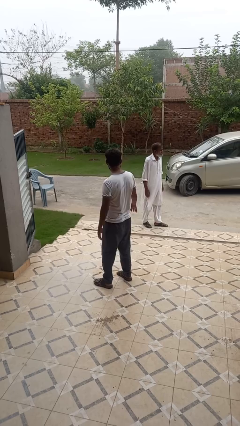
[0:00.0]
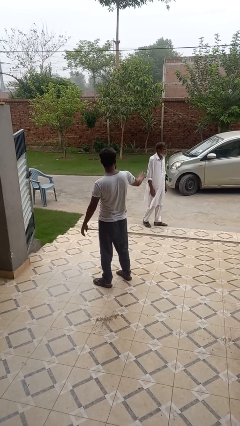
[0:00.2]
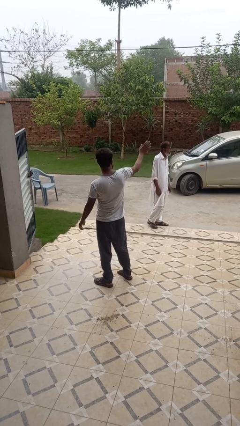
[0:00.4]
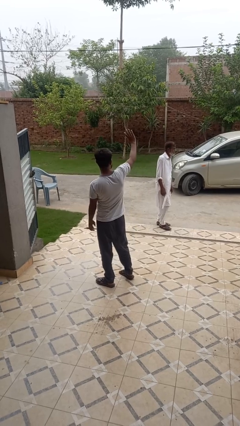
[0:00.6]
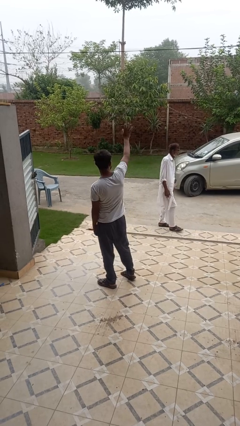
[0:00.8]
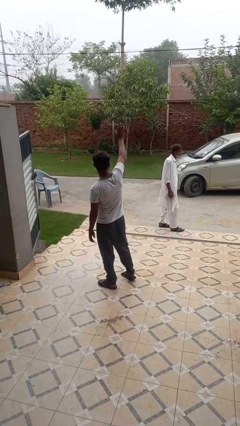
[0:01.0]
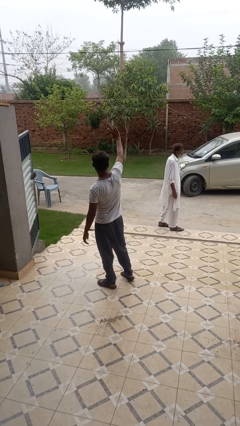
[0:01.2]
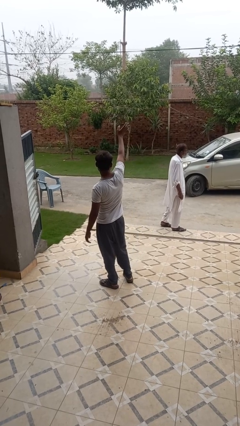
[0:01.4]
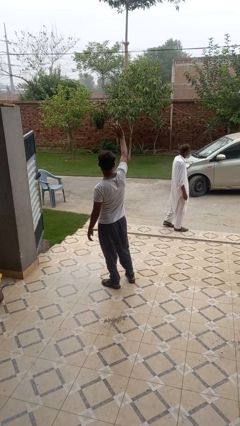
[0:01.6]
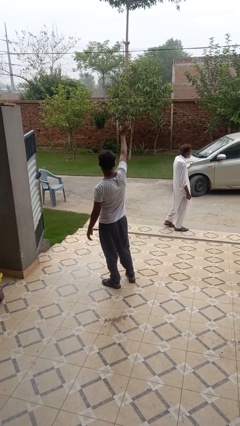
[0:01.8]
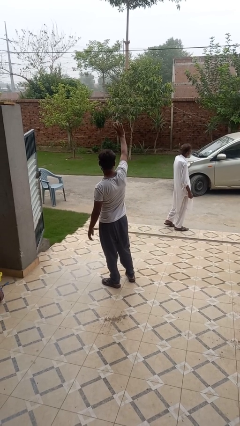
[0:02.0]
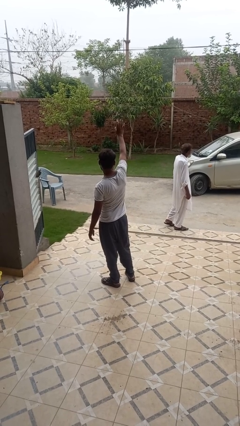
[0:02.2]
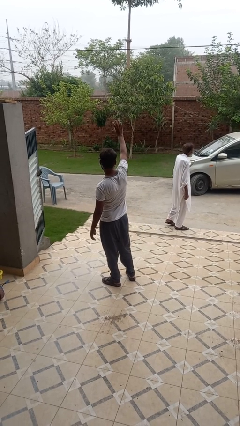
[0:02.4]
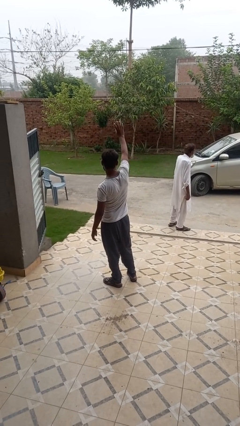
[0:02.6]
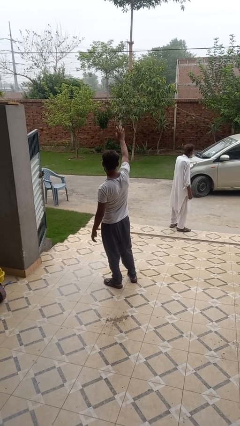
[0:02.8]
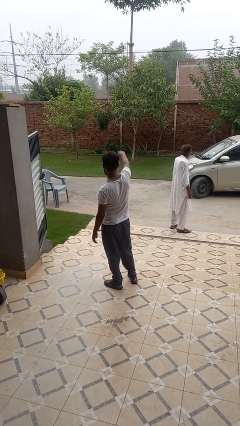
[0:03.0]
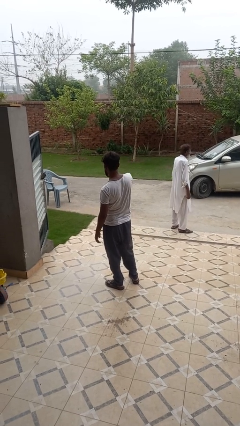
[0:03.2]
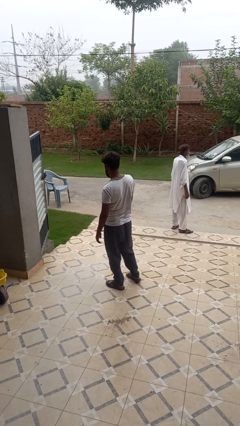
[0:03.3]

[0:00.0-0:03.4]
person waves at person

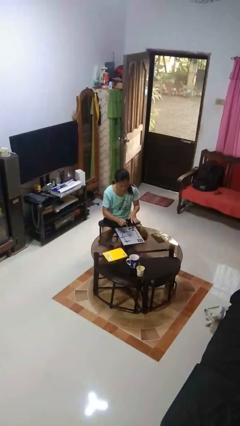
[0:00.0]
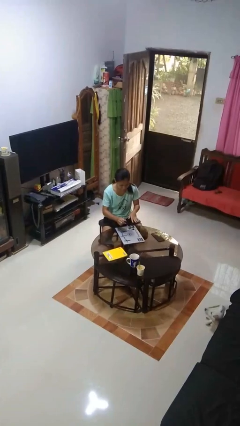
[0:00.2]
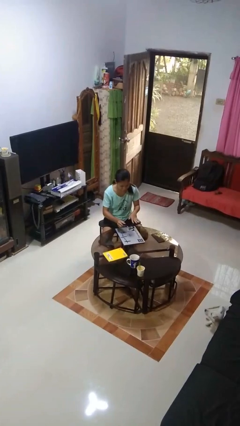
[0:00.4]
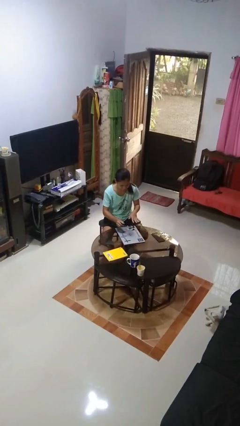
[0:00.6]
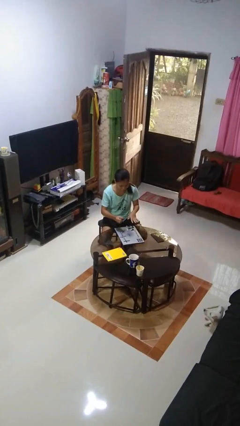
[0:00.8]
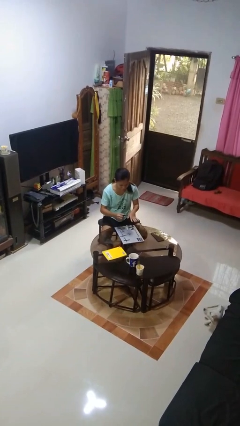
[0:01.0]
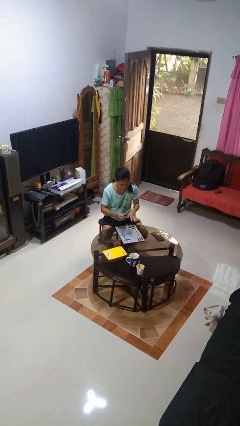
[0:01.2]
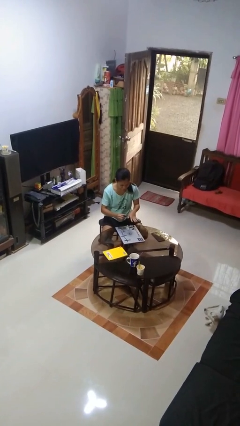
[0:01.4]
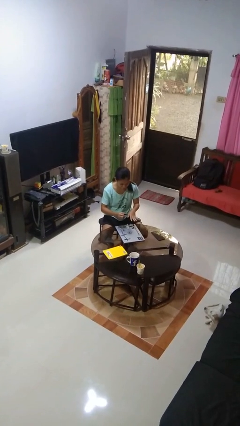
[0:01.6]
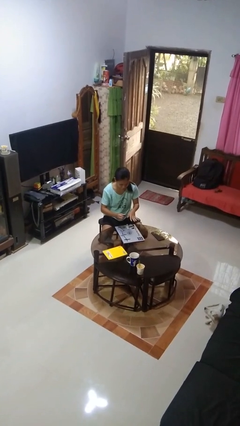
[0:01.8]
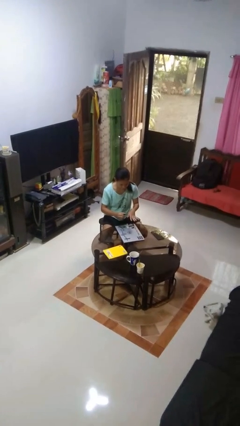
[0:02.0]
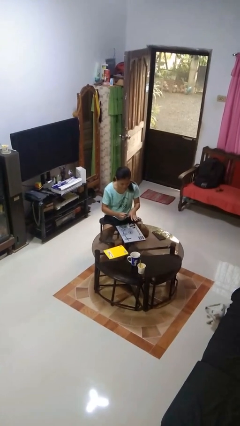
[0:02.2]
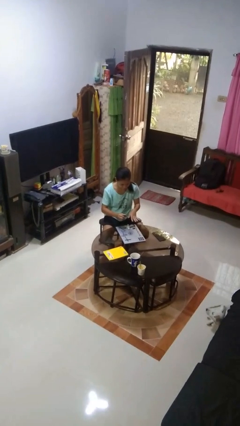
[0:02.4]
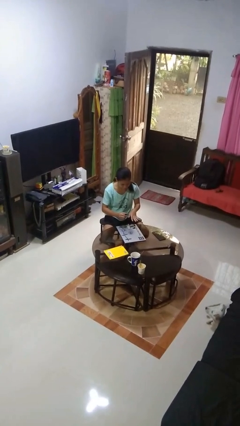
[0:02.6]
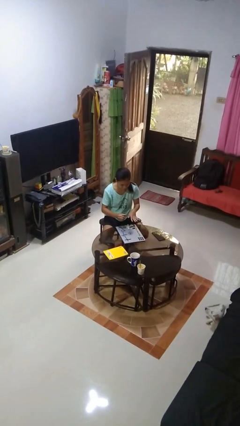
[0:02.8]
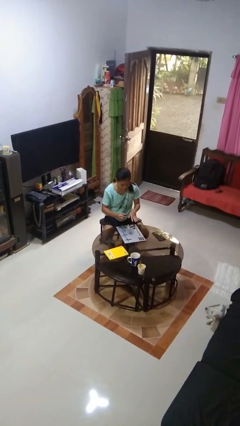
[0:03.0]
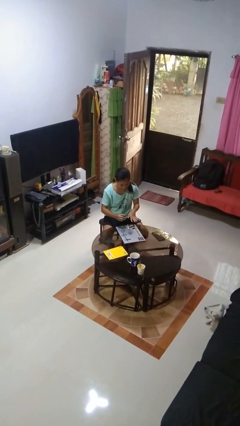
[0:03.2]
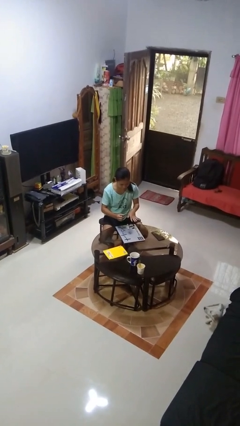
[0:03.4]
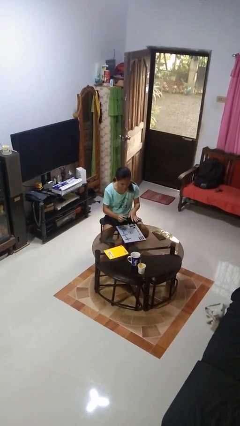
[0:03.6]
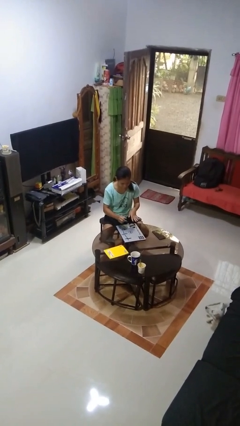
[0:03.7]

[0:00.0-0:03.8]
person paints fingernails

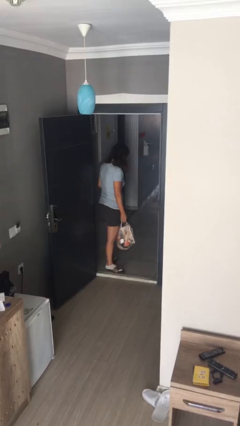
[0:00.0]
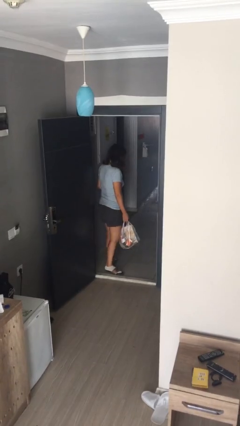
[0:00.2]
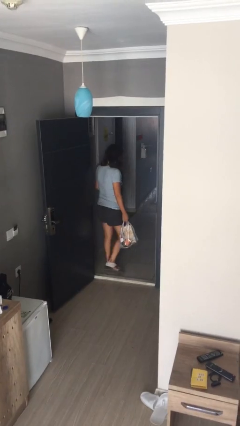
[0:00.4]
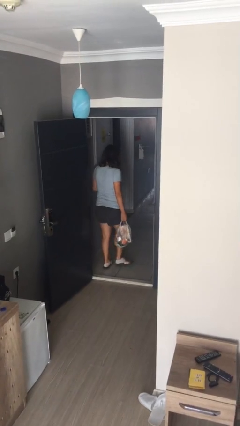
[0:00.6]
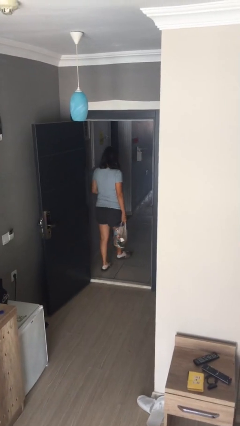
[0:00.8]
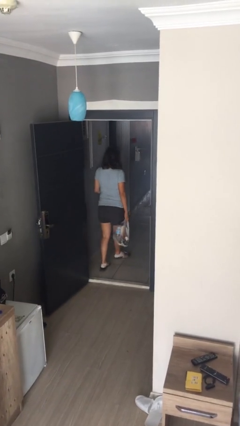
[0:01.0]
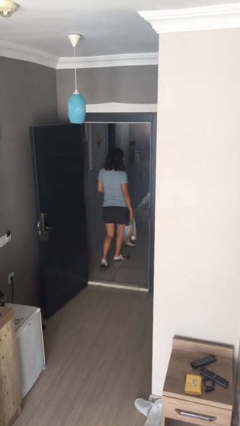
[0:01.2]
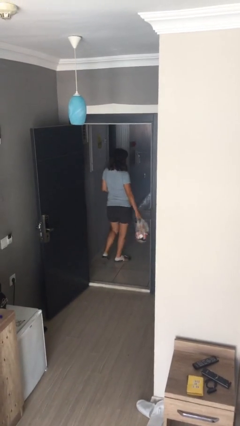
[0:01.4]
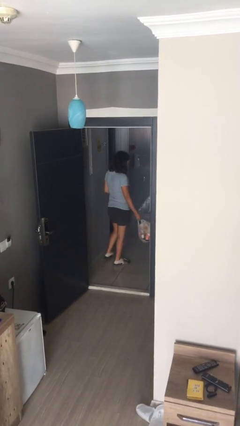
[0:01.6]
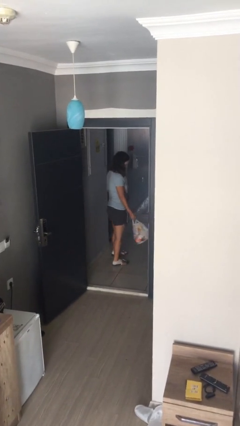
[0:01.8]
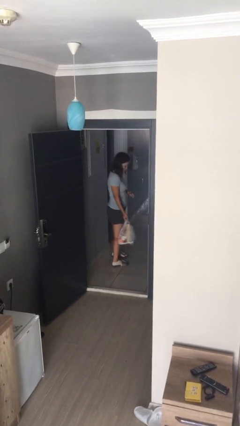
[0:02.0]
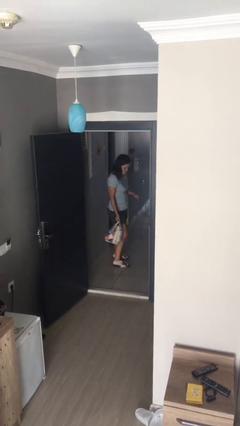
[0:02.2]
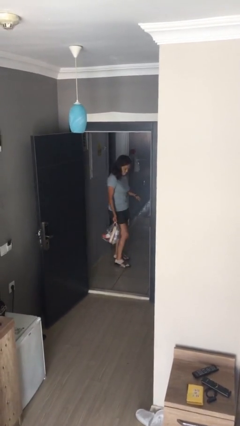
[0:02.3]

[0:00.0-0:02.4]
person carries groceries

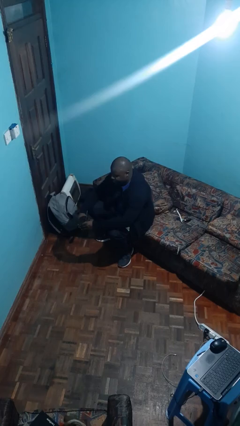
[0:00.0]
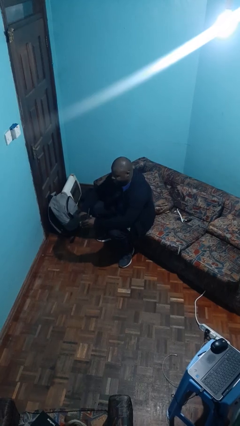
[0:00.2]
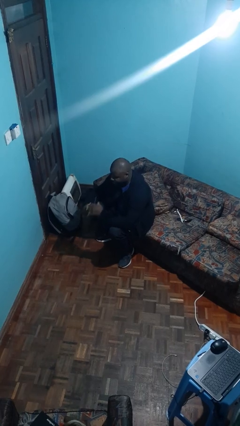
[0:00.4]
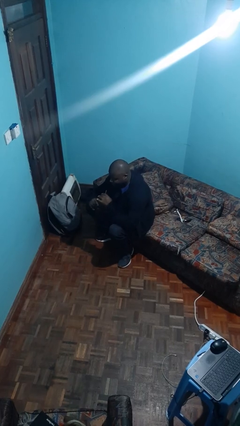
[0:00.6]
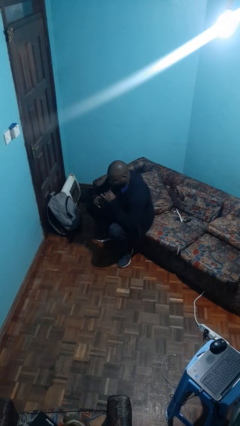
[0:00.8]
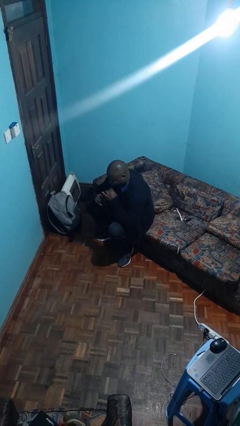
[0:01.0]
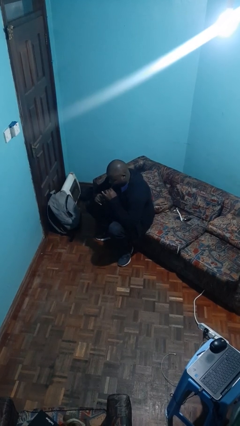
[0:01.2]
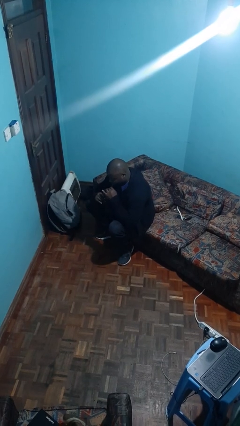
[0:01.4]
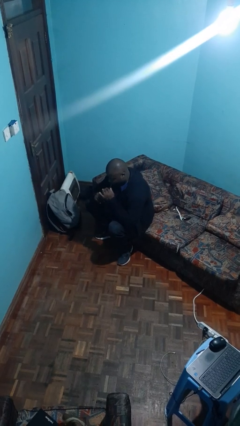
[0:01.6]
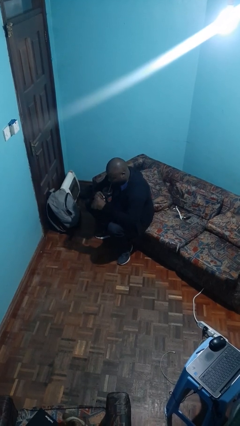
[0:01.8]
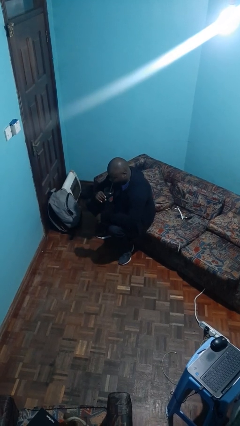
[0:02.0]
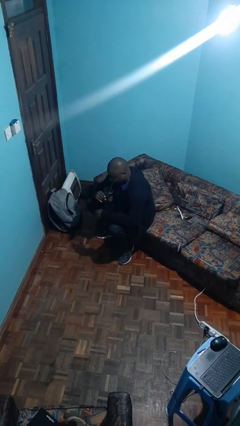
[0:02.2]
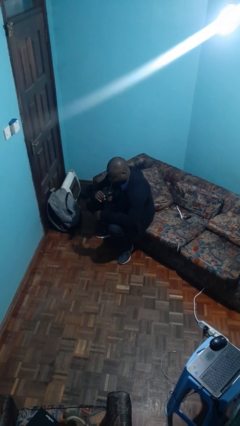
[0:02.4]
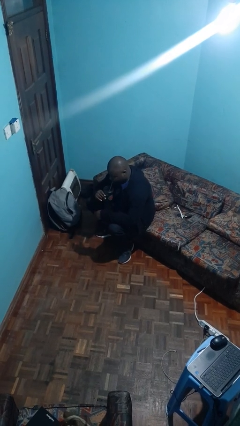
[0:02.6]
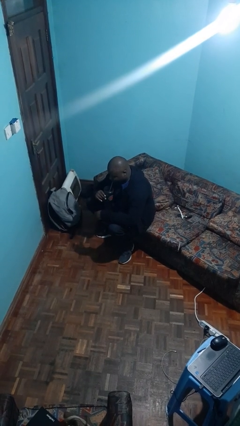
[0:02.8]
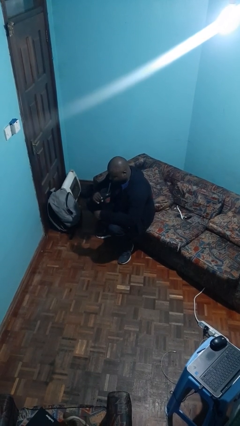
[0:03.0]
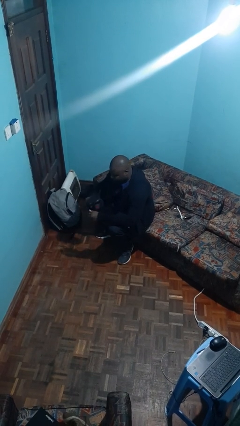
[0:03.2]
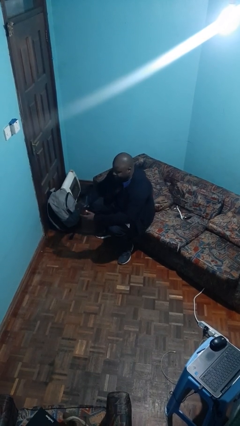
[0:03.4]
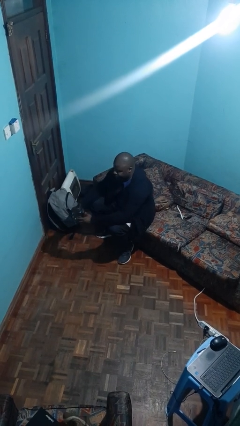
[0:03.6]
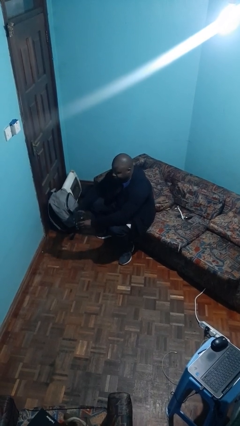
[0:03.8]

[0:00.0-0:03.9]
person drinks from straw

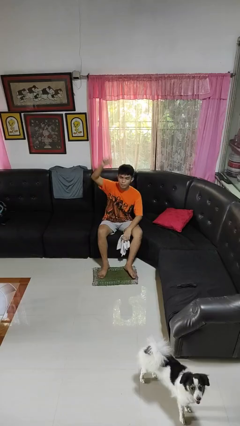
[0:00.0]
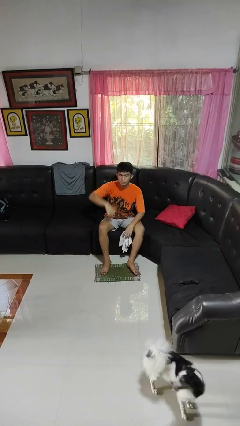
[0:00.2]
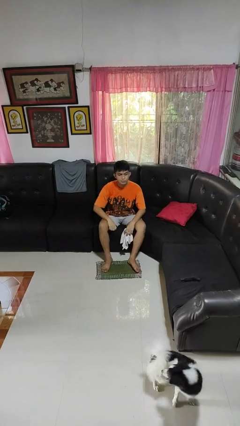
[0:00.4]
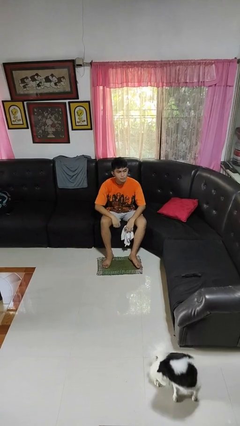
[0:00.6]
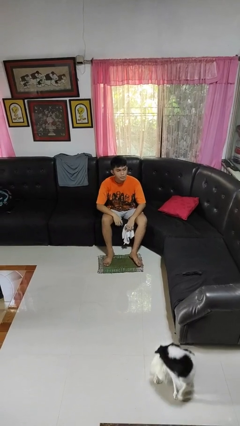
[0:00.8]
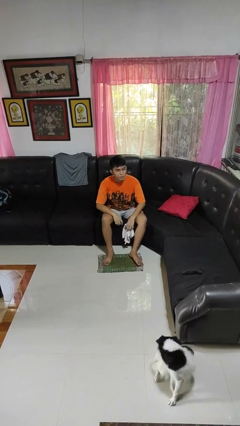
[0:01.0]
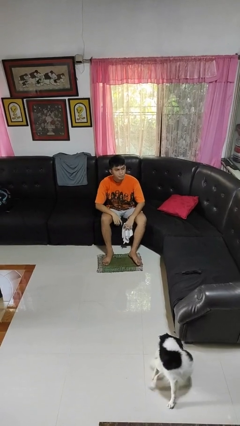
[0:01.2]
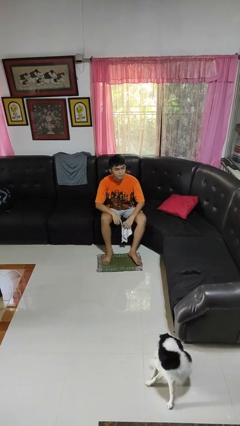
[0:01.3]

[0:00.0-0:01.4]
person gestures lower hand

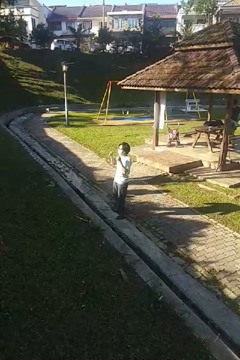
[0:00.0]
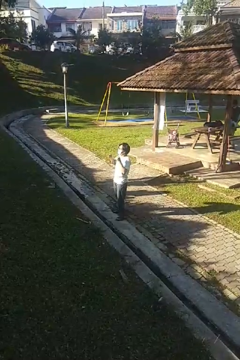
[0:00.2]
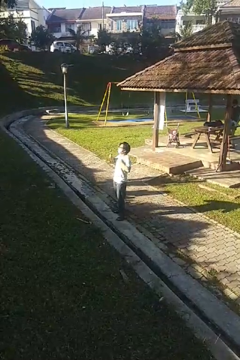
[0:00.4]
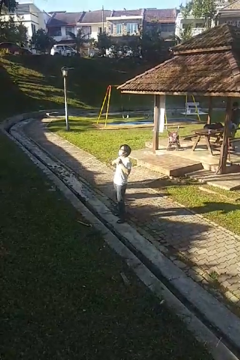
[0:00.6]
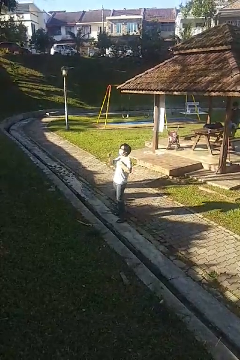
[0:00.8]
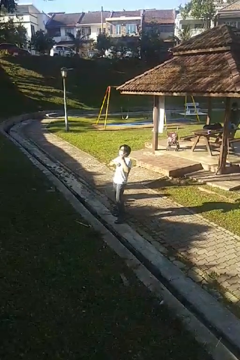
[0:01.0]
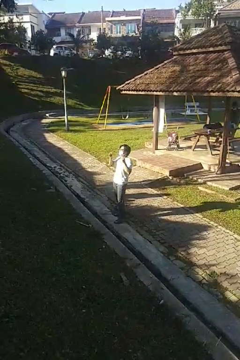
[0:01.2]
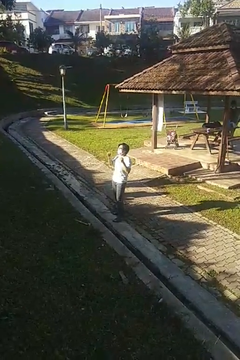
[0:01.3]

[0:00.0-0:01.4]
person drums on chest

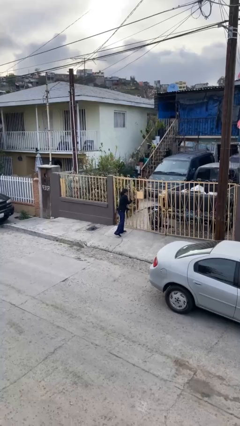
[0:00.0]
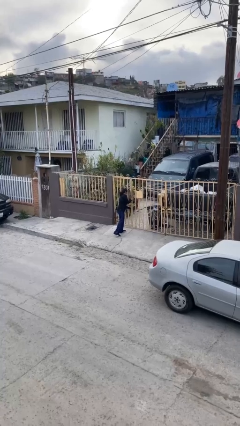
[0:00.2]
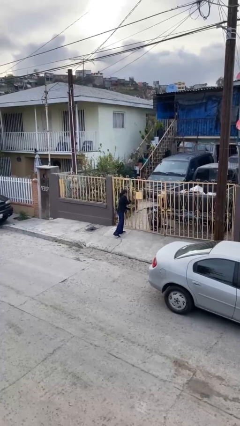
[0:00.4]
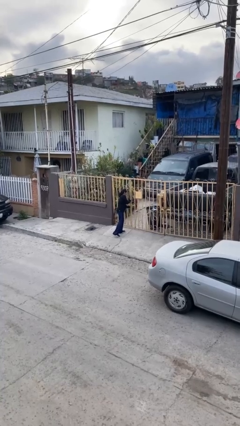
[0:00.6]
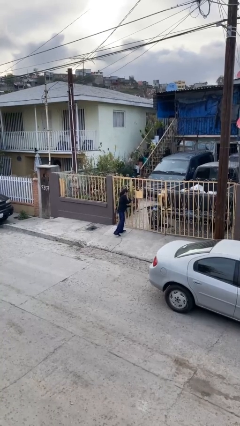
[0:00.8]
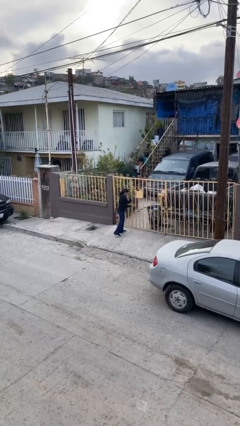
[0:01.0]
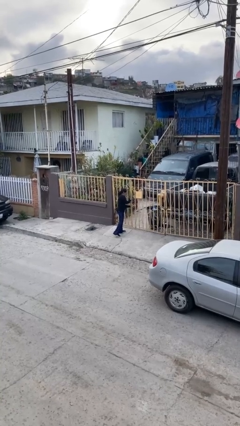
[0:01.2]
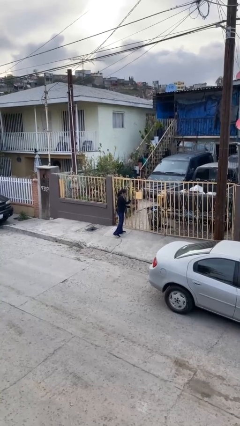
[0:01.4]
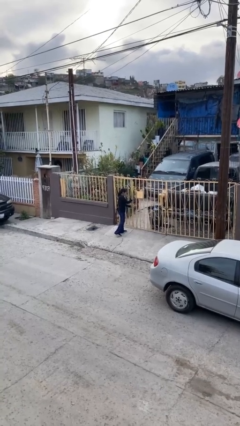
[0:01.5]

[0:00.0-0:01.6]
person closes facility door
